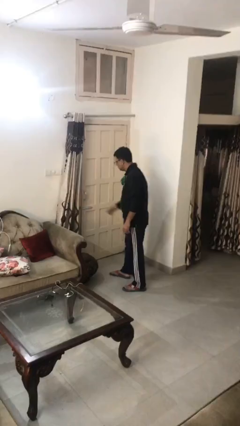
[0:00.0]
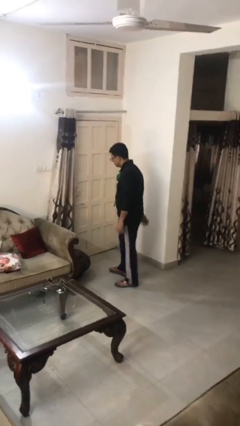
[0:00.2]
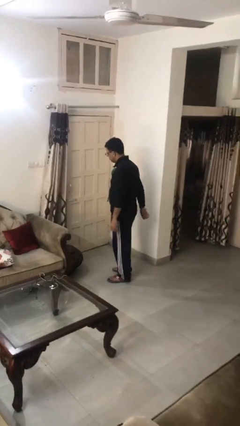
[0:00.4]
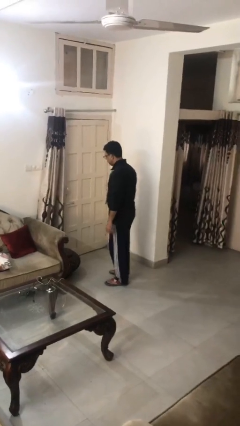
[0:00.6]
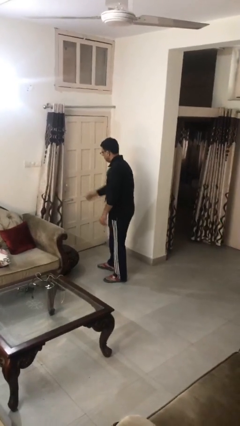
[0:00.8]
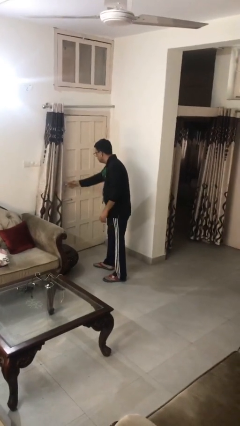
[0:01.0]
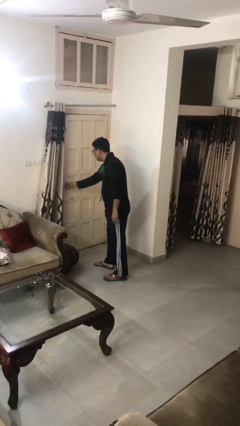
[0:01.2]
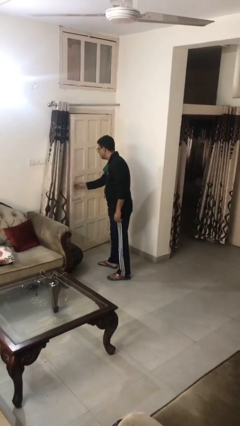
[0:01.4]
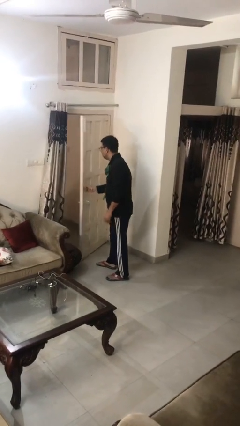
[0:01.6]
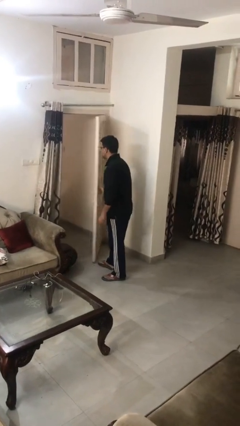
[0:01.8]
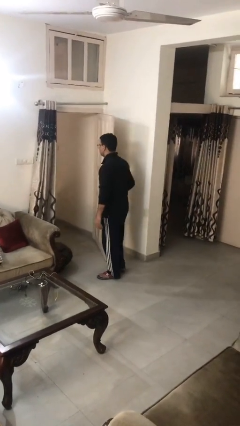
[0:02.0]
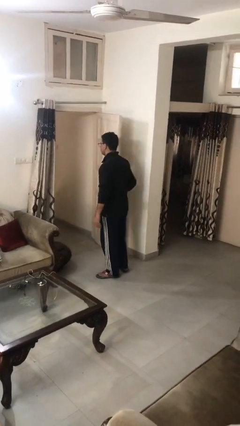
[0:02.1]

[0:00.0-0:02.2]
person opens facility door

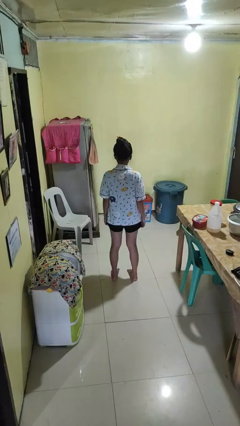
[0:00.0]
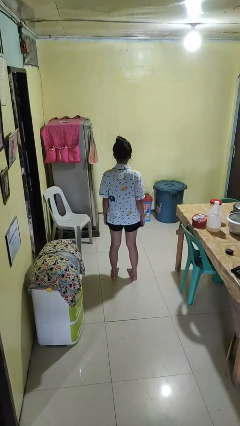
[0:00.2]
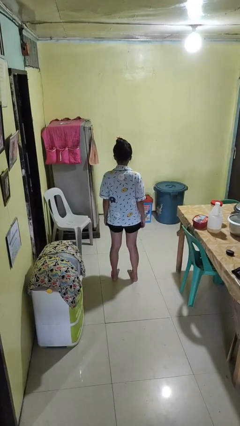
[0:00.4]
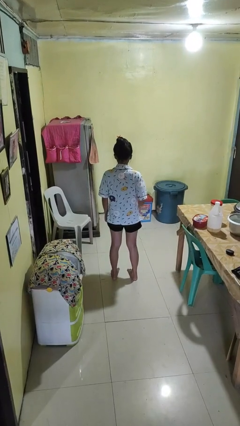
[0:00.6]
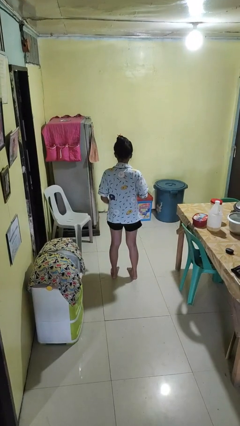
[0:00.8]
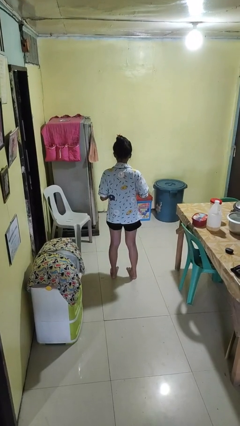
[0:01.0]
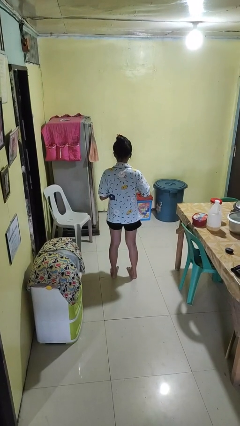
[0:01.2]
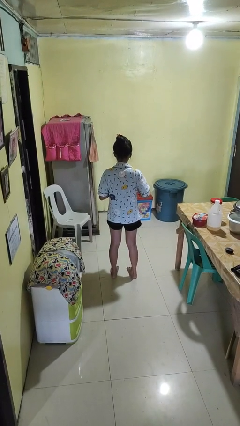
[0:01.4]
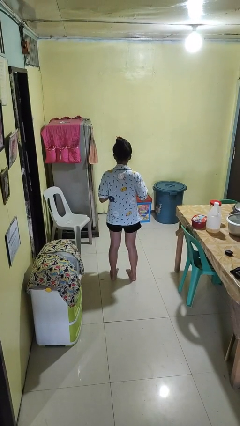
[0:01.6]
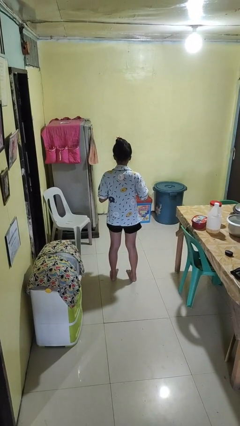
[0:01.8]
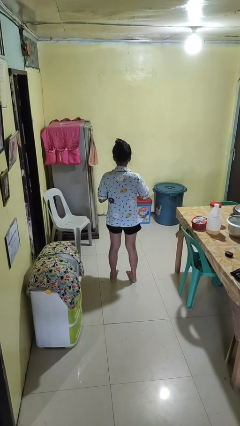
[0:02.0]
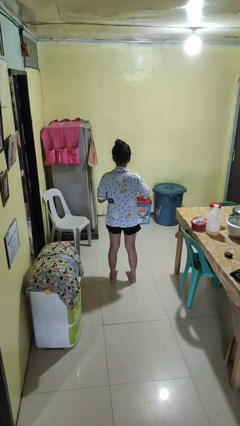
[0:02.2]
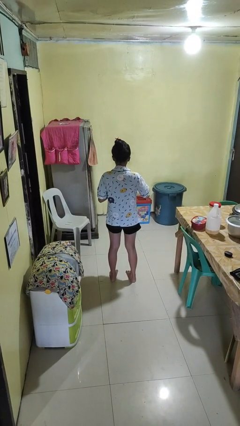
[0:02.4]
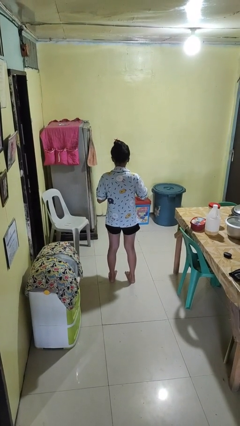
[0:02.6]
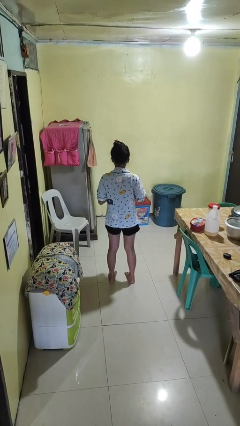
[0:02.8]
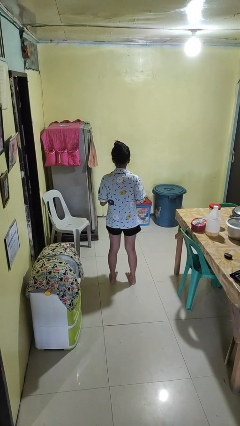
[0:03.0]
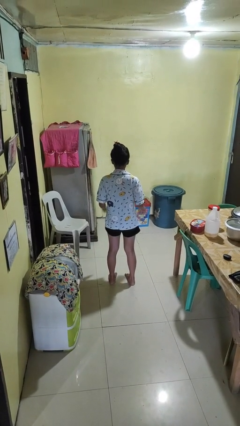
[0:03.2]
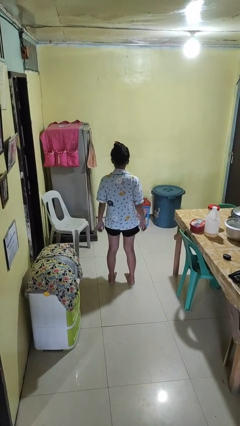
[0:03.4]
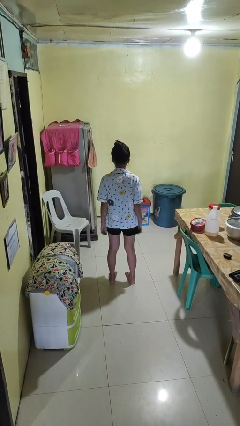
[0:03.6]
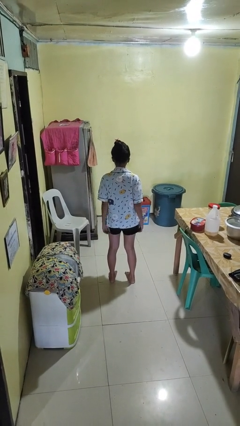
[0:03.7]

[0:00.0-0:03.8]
person unbuttons shirt

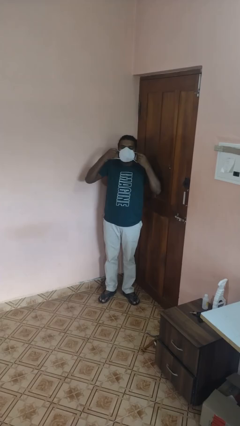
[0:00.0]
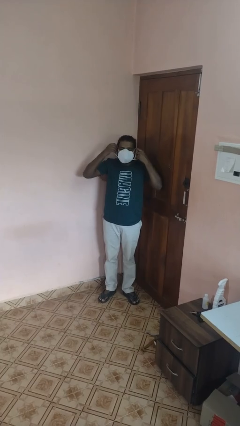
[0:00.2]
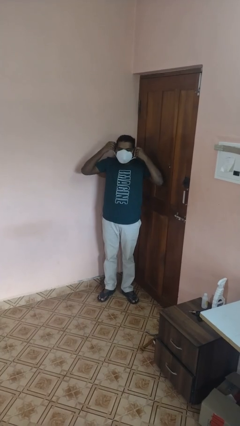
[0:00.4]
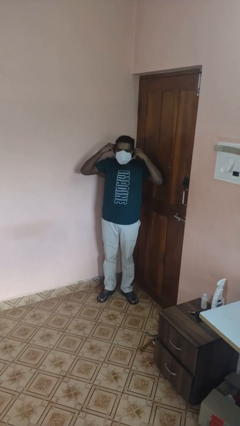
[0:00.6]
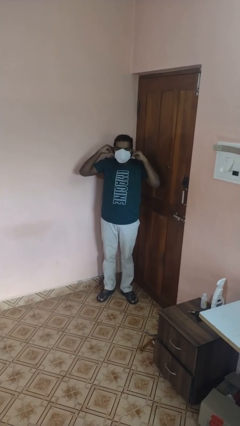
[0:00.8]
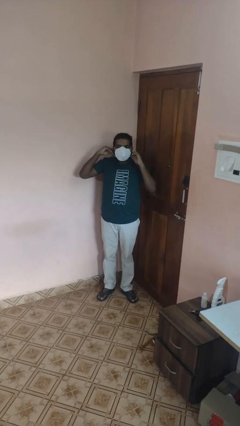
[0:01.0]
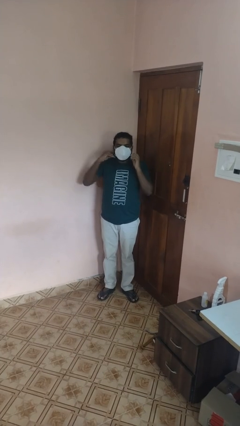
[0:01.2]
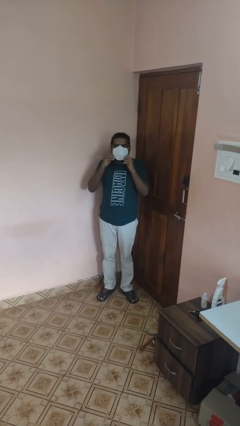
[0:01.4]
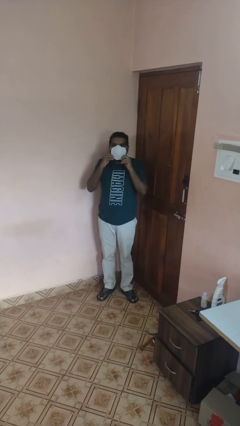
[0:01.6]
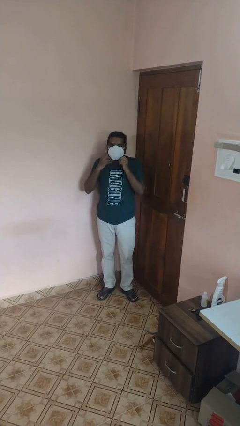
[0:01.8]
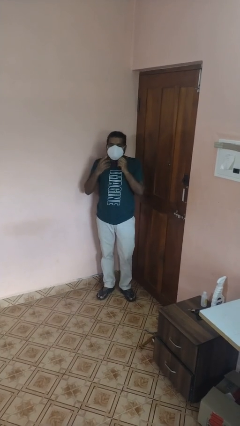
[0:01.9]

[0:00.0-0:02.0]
person puts on facemask

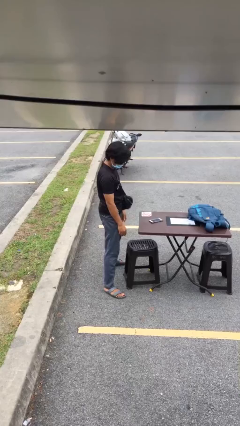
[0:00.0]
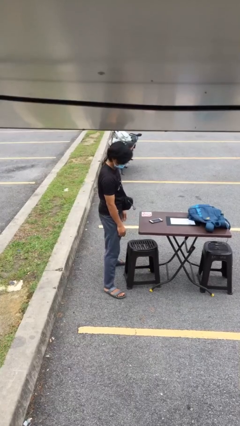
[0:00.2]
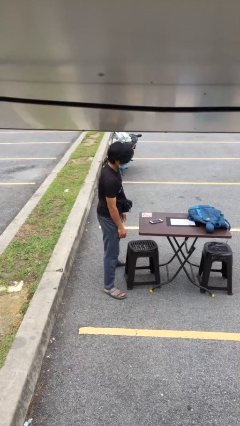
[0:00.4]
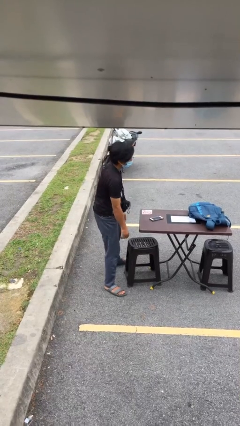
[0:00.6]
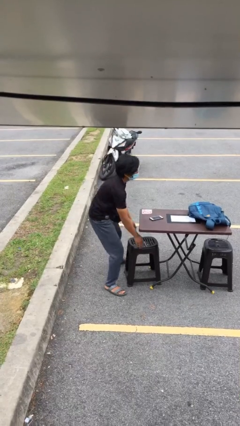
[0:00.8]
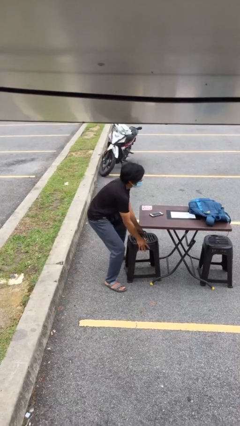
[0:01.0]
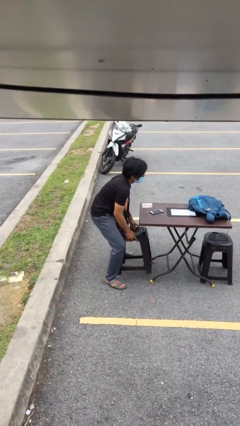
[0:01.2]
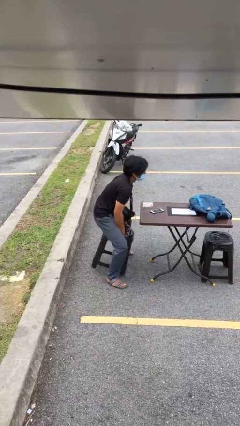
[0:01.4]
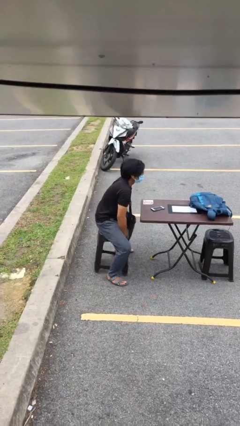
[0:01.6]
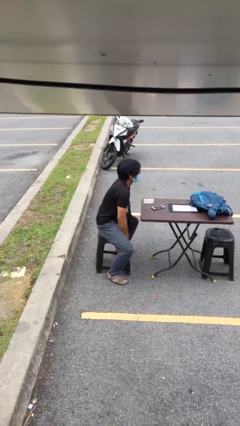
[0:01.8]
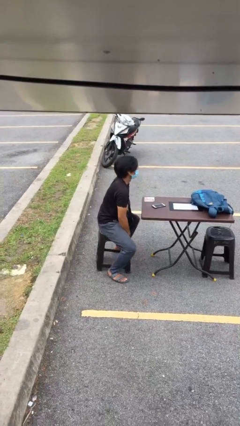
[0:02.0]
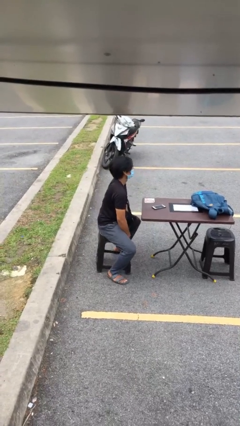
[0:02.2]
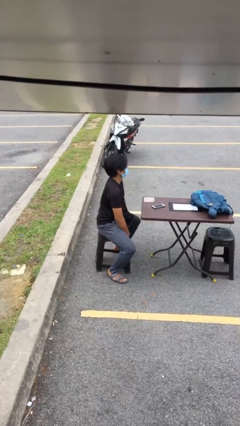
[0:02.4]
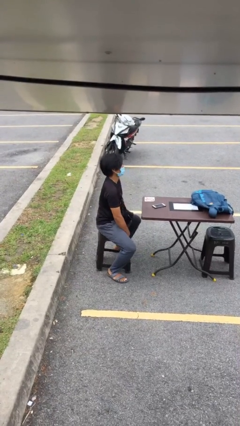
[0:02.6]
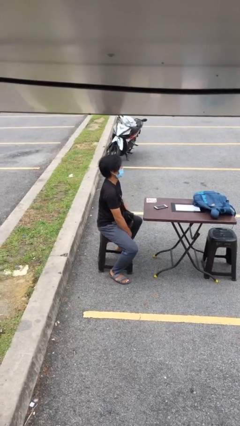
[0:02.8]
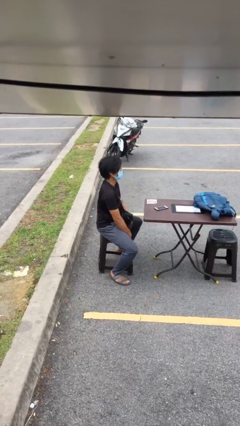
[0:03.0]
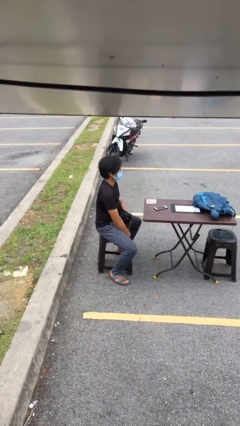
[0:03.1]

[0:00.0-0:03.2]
person sits down

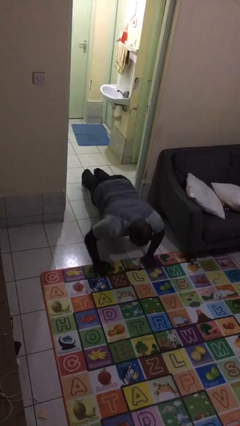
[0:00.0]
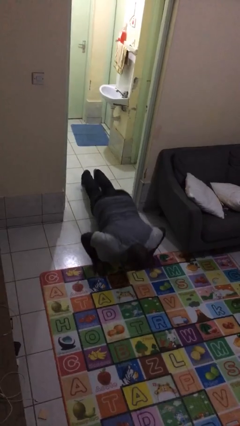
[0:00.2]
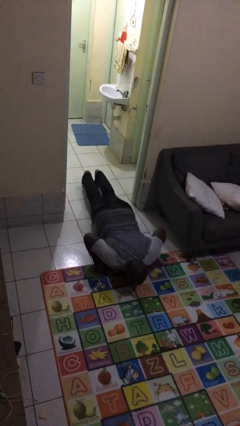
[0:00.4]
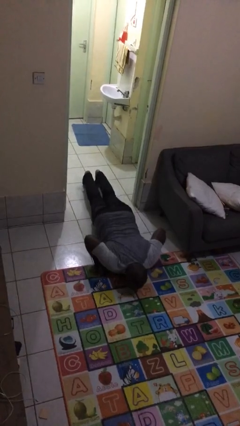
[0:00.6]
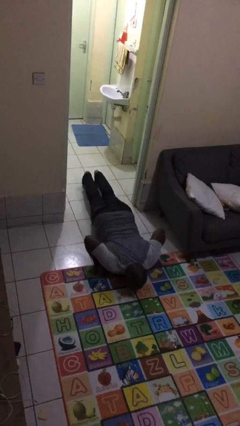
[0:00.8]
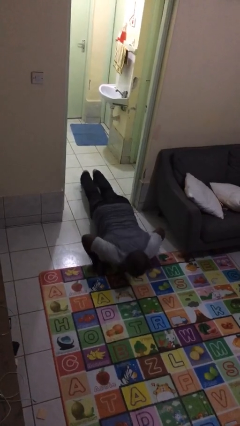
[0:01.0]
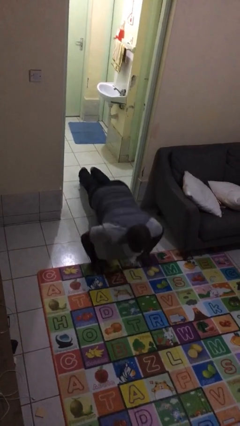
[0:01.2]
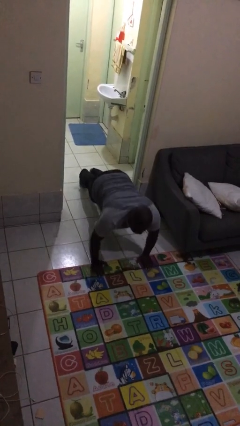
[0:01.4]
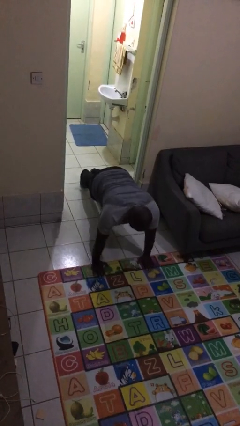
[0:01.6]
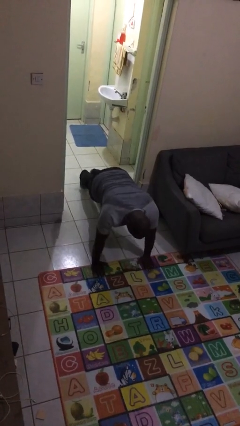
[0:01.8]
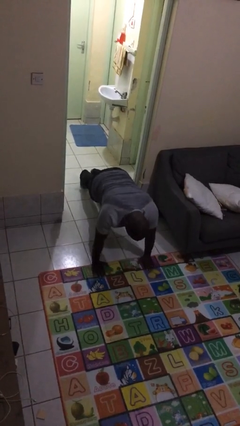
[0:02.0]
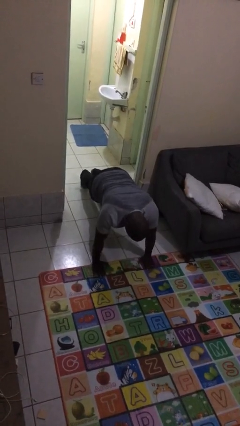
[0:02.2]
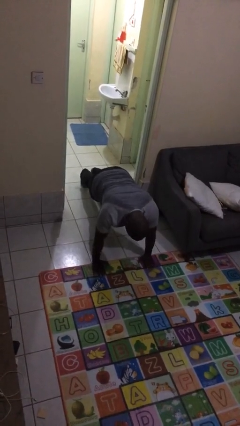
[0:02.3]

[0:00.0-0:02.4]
person exercises with pushup

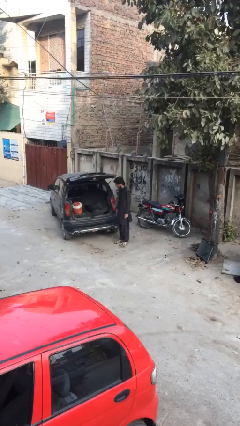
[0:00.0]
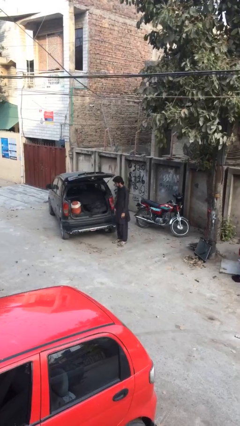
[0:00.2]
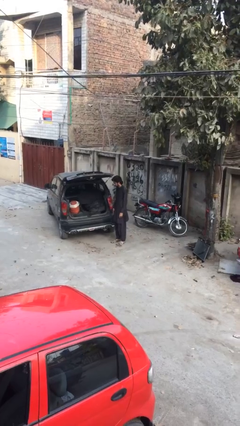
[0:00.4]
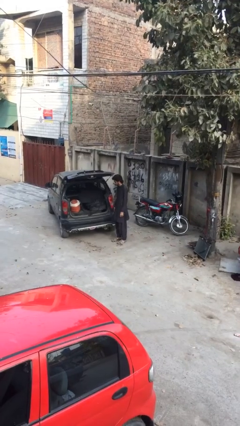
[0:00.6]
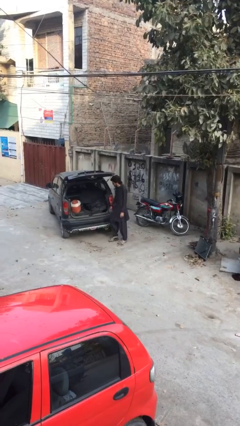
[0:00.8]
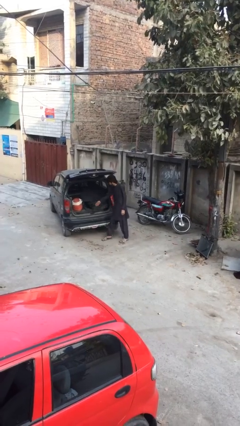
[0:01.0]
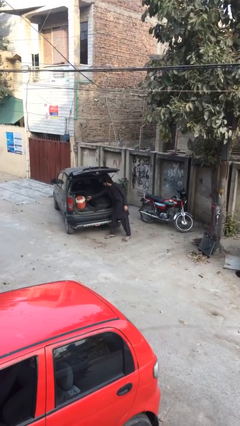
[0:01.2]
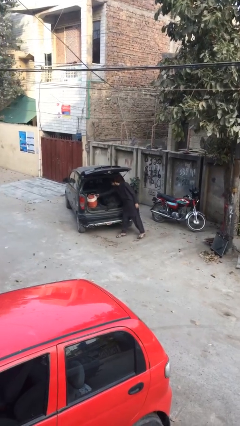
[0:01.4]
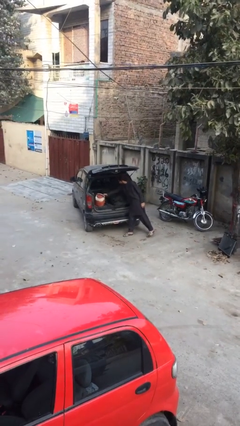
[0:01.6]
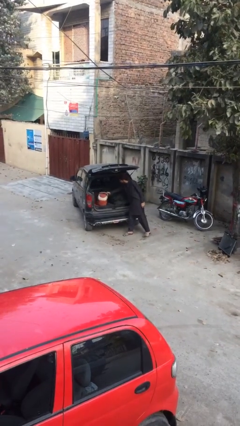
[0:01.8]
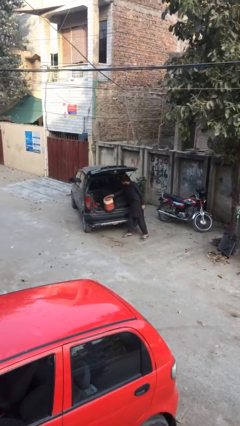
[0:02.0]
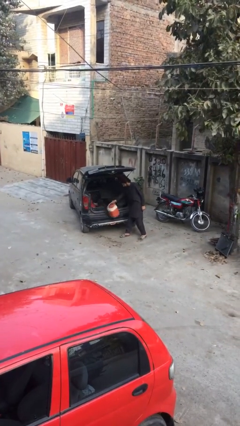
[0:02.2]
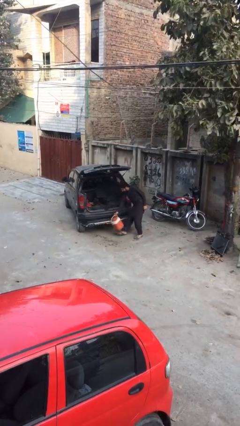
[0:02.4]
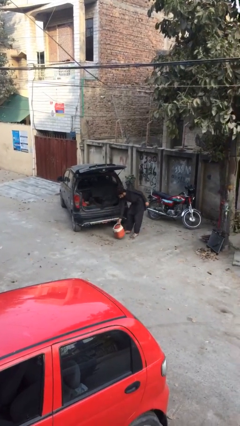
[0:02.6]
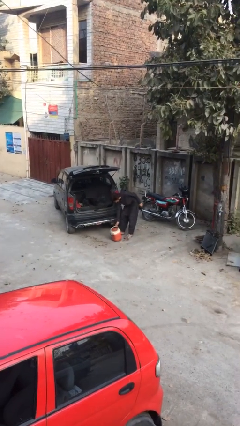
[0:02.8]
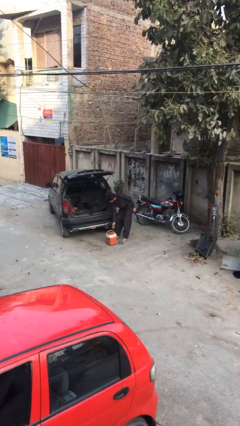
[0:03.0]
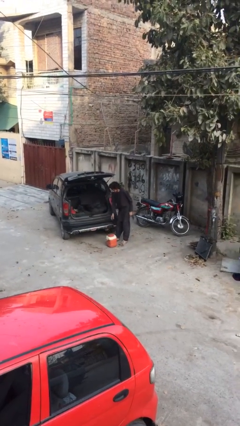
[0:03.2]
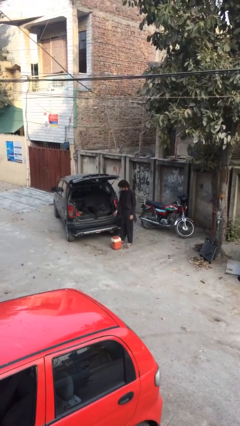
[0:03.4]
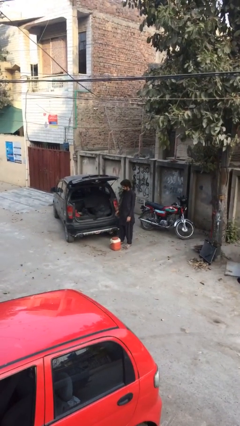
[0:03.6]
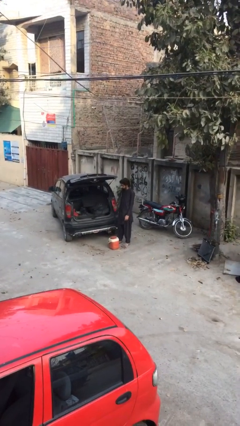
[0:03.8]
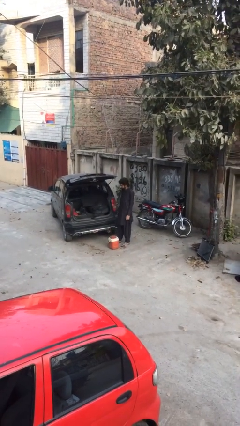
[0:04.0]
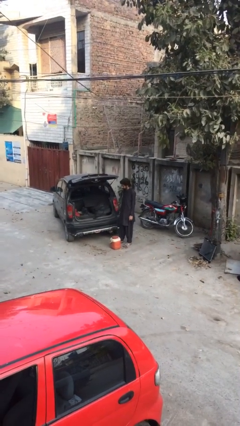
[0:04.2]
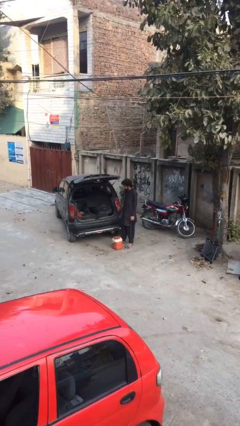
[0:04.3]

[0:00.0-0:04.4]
person unloads car
